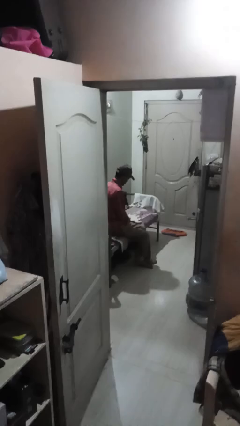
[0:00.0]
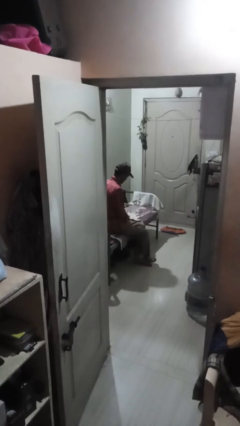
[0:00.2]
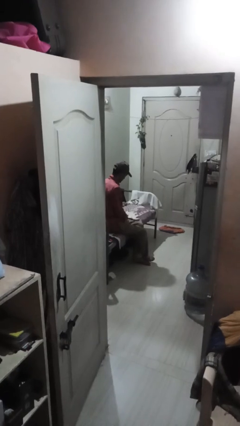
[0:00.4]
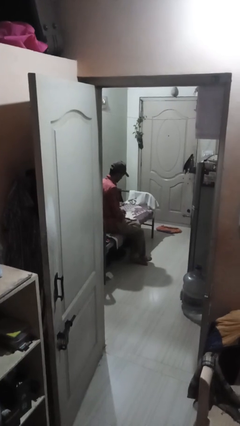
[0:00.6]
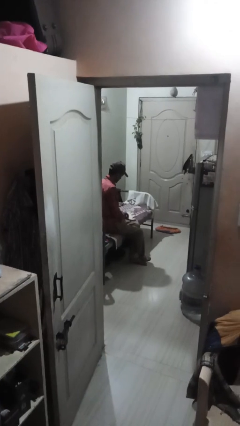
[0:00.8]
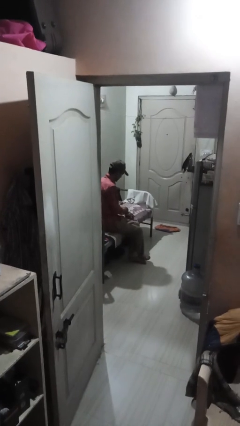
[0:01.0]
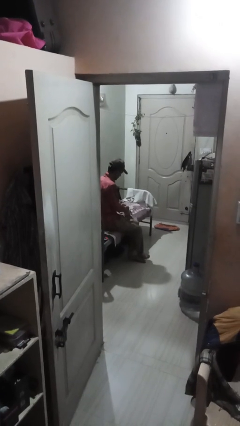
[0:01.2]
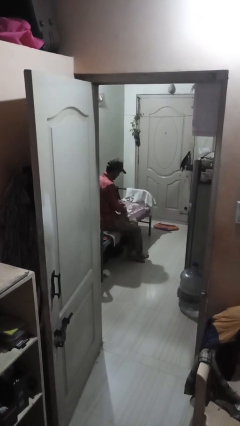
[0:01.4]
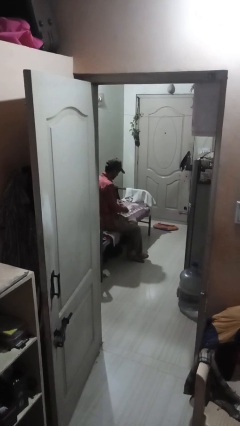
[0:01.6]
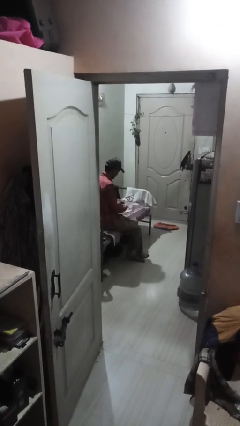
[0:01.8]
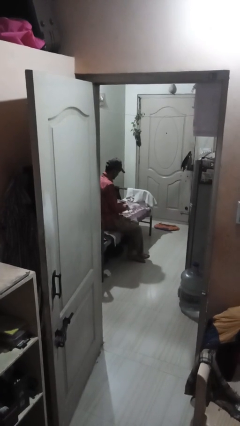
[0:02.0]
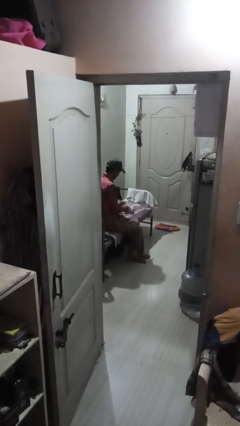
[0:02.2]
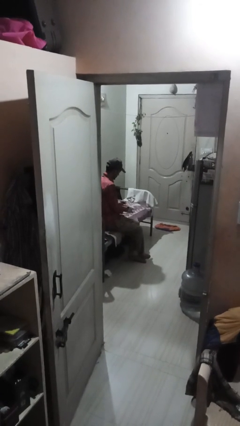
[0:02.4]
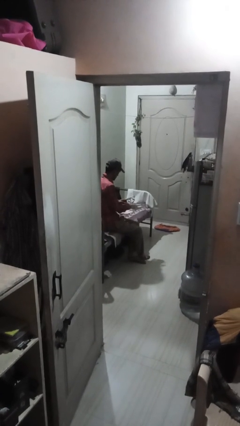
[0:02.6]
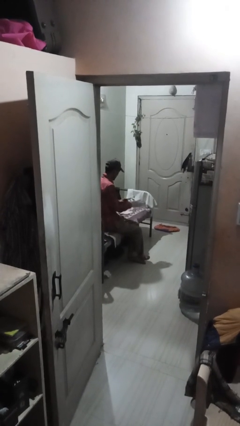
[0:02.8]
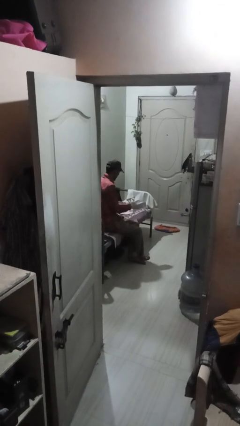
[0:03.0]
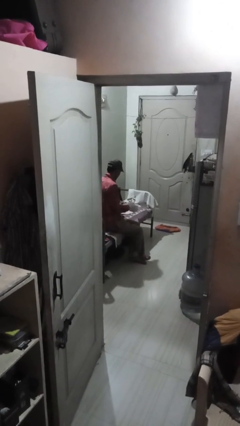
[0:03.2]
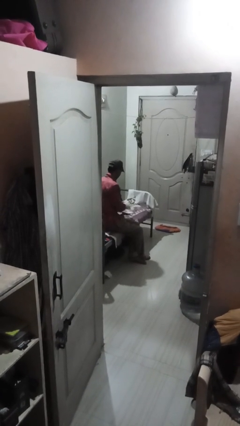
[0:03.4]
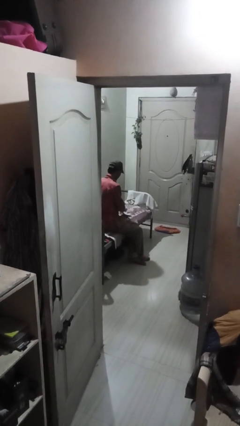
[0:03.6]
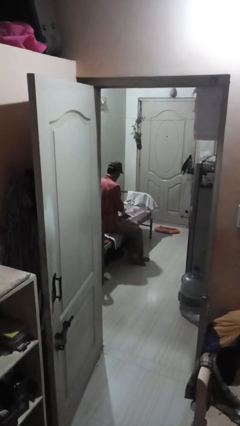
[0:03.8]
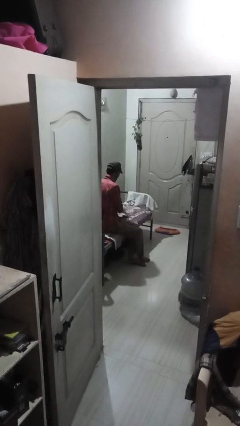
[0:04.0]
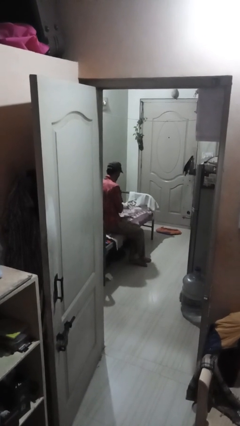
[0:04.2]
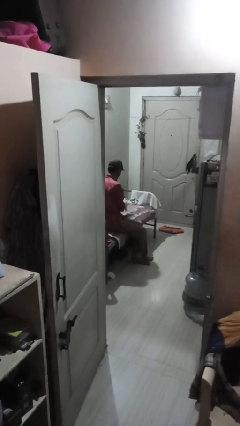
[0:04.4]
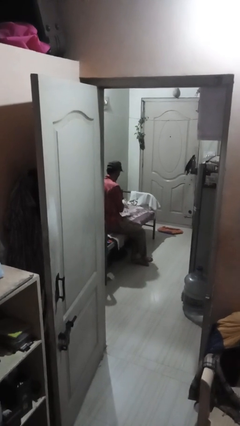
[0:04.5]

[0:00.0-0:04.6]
person puts on gloves

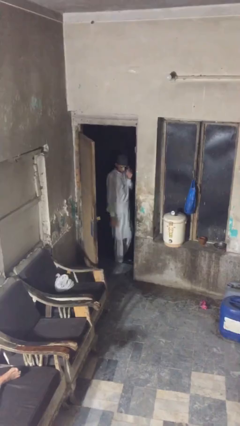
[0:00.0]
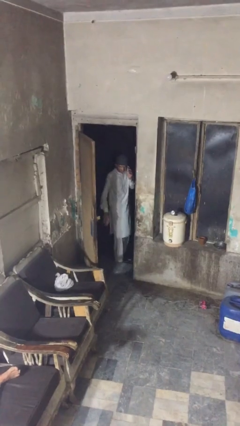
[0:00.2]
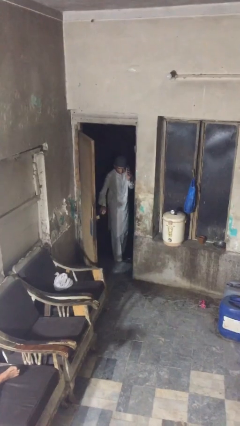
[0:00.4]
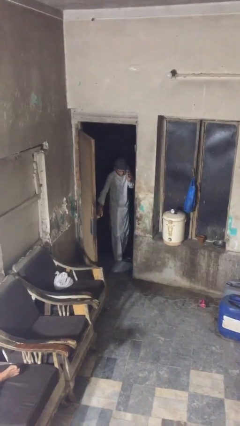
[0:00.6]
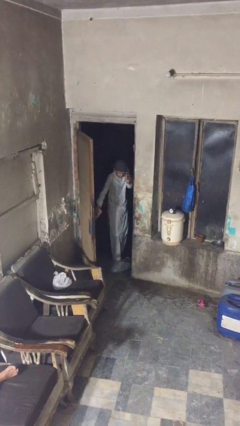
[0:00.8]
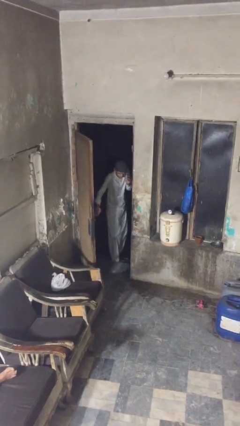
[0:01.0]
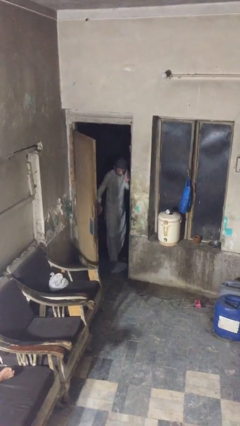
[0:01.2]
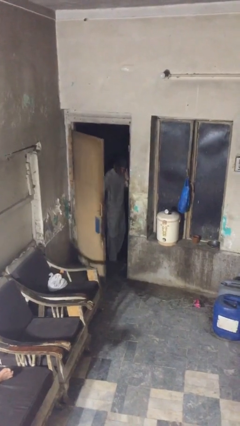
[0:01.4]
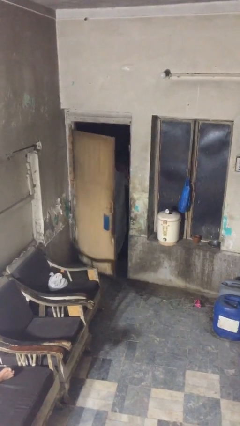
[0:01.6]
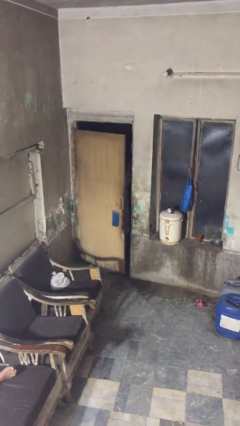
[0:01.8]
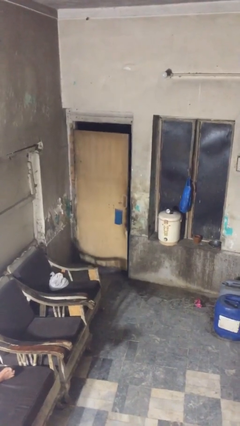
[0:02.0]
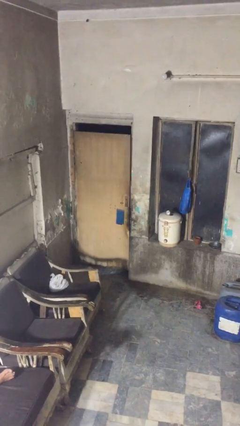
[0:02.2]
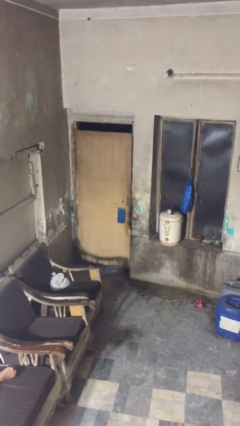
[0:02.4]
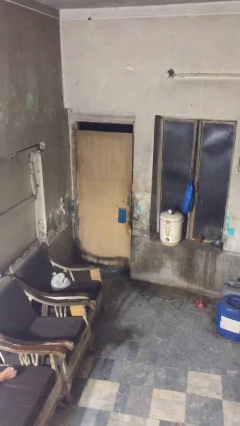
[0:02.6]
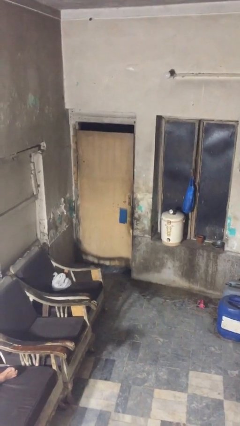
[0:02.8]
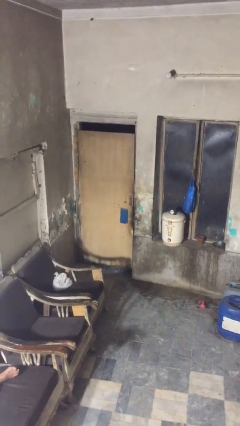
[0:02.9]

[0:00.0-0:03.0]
person closes facility door

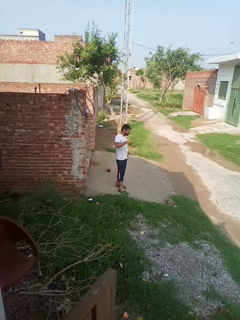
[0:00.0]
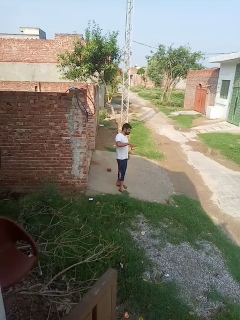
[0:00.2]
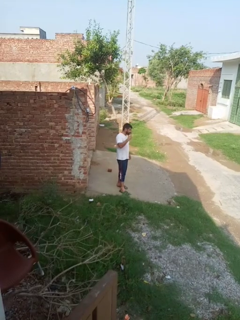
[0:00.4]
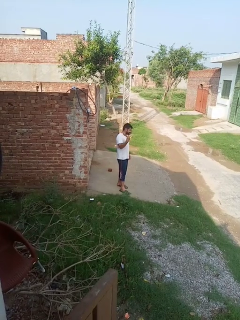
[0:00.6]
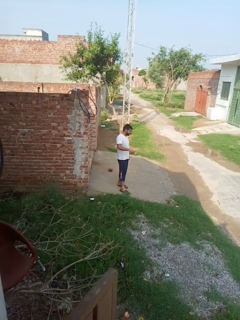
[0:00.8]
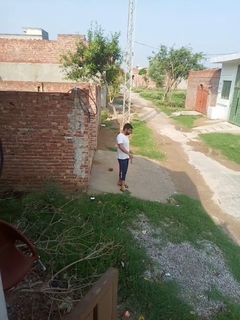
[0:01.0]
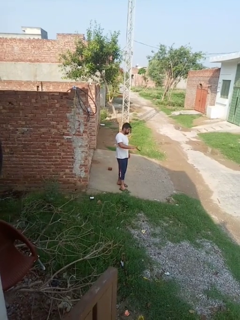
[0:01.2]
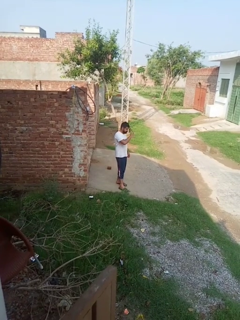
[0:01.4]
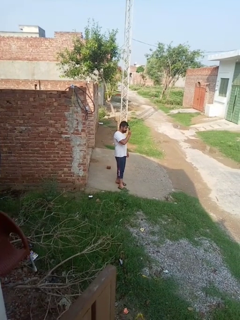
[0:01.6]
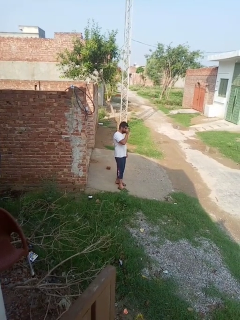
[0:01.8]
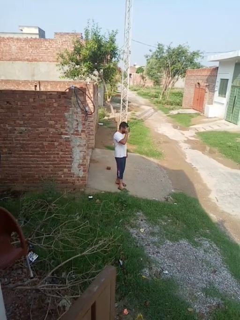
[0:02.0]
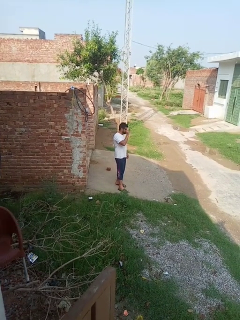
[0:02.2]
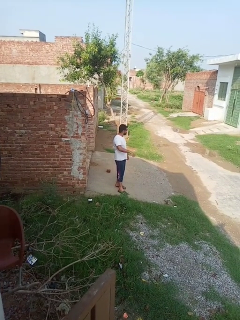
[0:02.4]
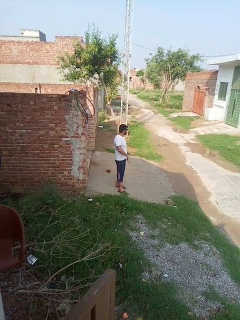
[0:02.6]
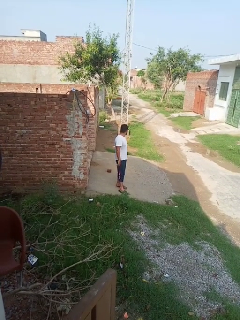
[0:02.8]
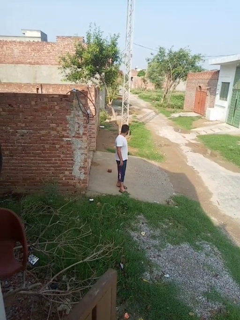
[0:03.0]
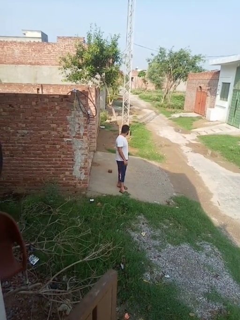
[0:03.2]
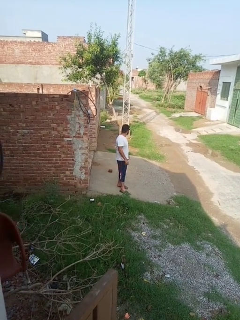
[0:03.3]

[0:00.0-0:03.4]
person puts on glasses

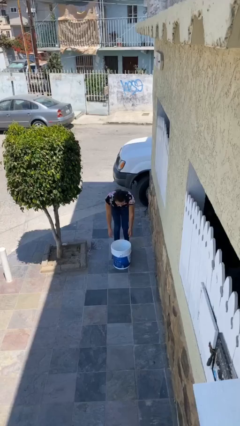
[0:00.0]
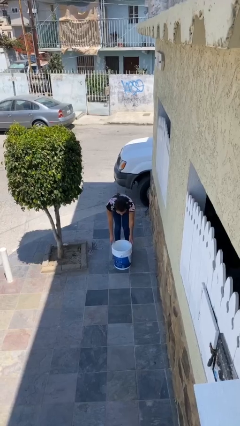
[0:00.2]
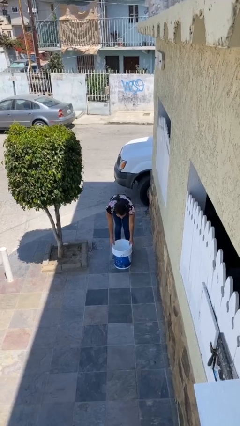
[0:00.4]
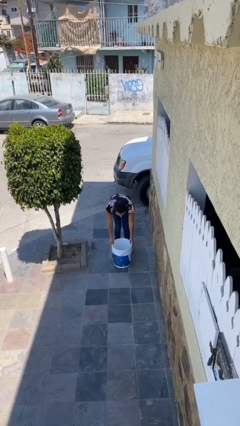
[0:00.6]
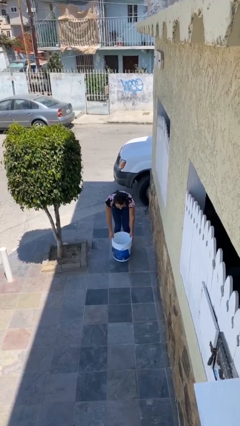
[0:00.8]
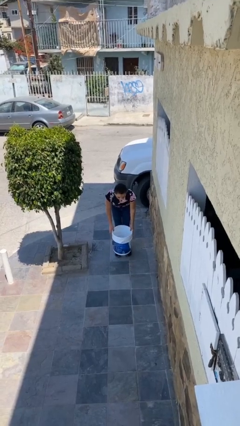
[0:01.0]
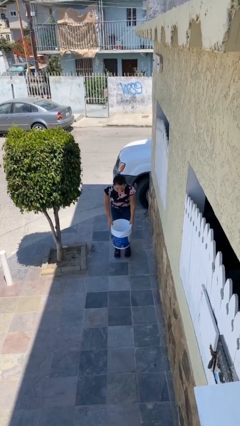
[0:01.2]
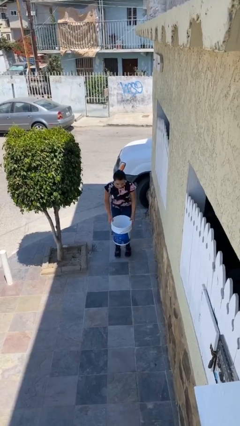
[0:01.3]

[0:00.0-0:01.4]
person picks up object from floor

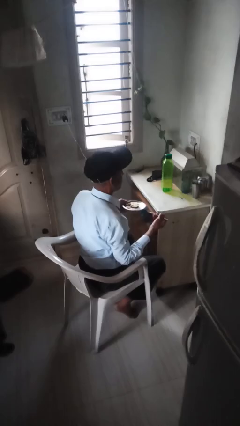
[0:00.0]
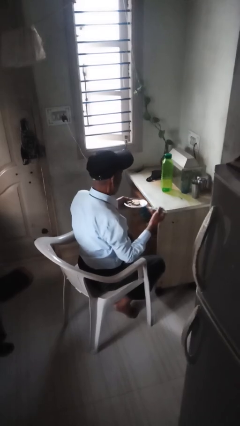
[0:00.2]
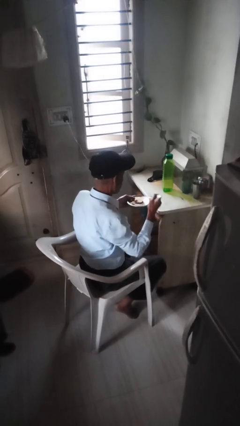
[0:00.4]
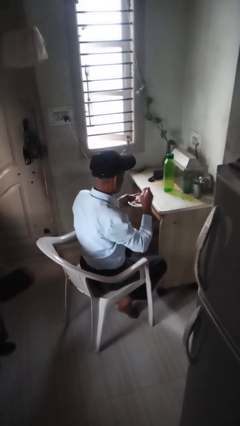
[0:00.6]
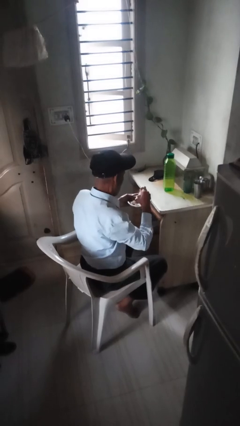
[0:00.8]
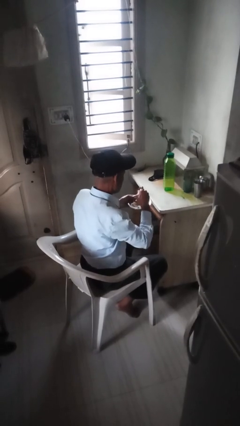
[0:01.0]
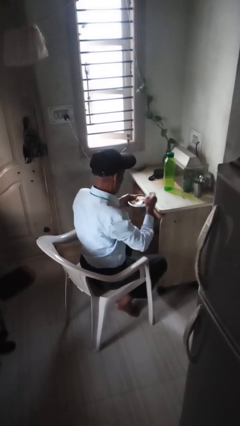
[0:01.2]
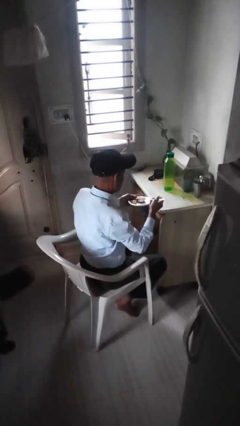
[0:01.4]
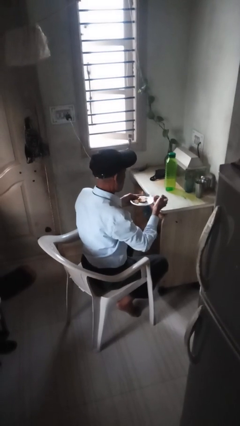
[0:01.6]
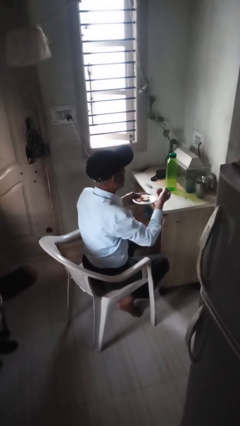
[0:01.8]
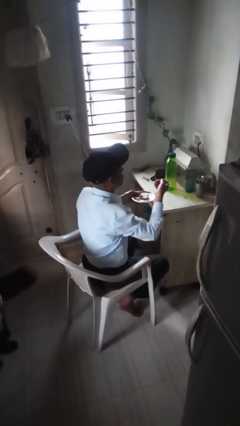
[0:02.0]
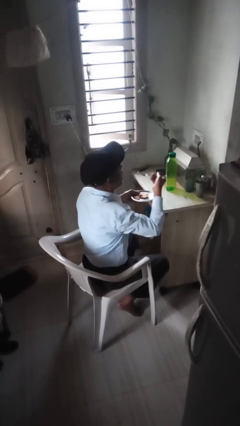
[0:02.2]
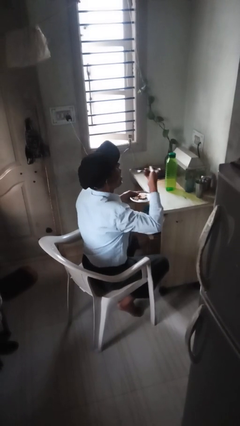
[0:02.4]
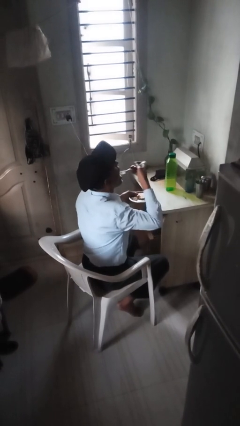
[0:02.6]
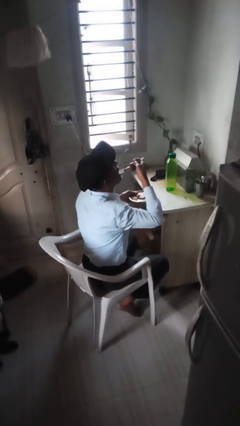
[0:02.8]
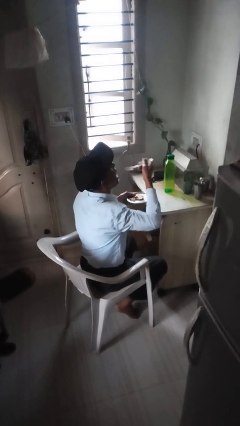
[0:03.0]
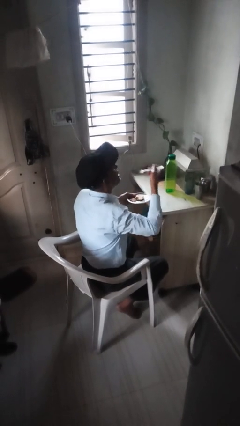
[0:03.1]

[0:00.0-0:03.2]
person eats with utensil

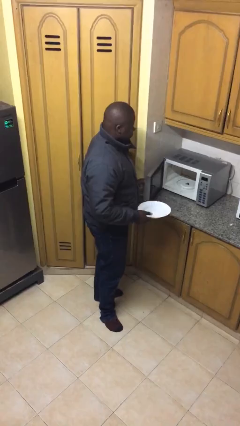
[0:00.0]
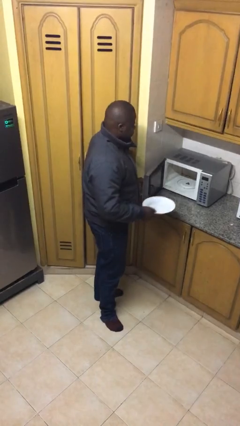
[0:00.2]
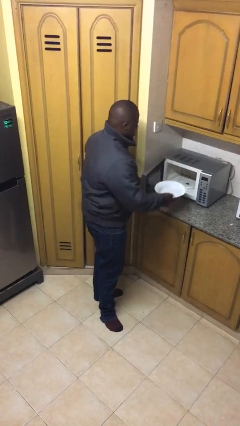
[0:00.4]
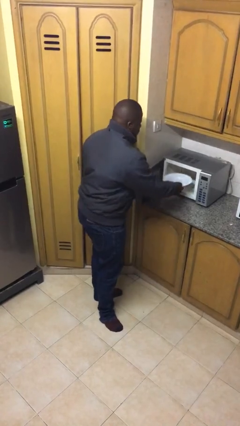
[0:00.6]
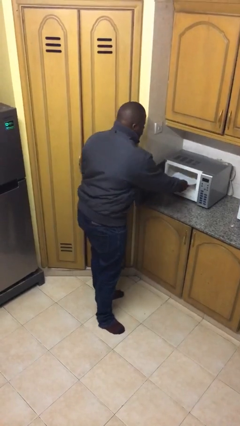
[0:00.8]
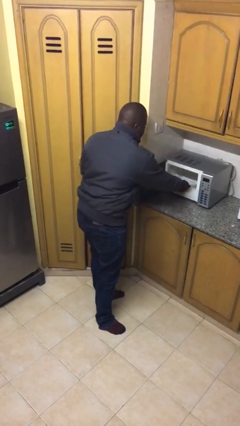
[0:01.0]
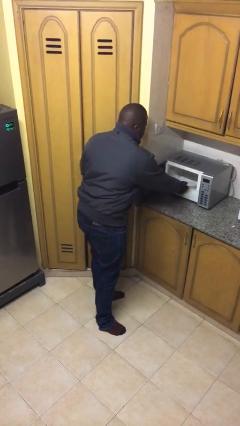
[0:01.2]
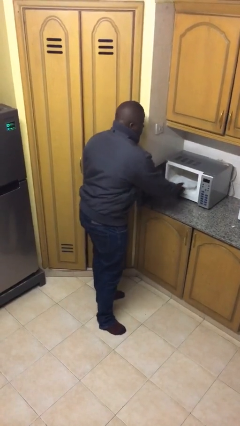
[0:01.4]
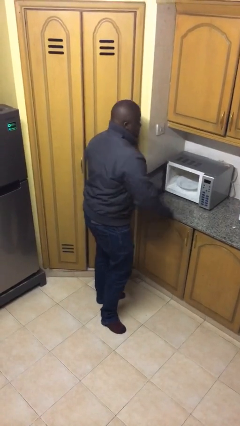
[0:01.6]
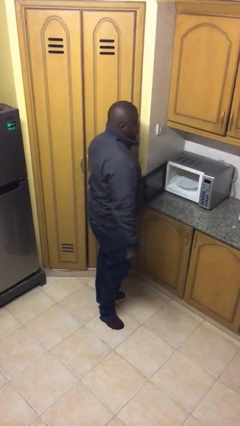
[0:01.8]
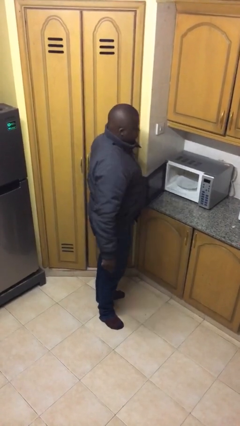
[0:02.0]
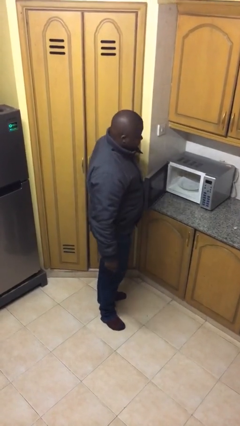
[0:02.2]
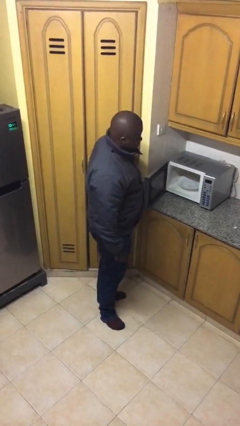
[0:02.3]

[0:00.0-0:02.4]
person puts object into microwave
